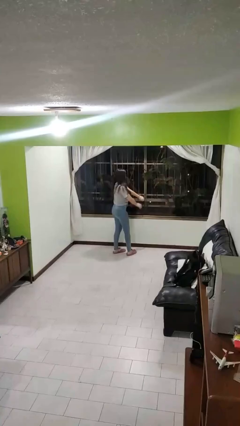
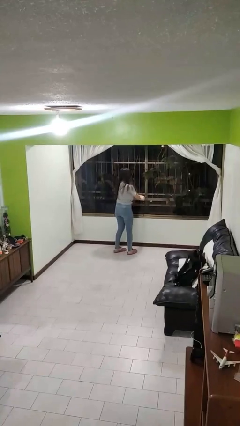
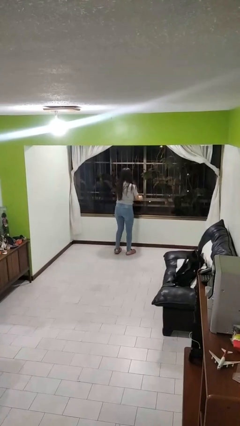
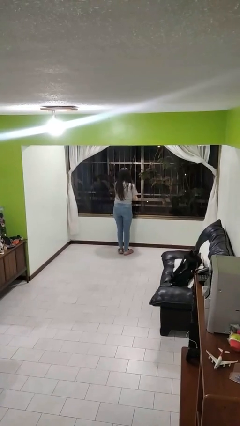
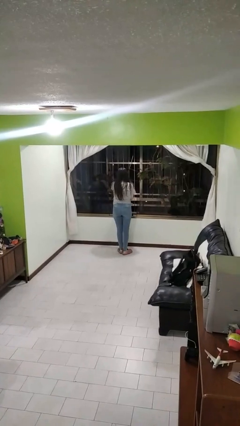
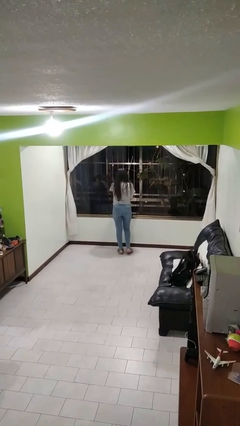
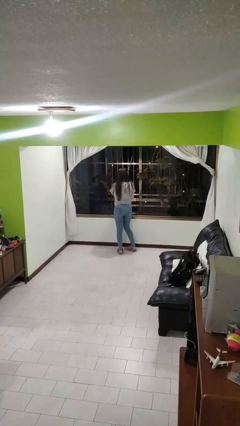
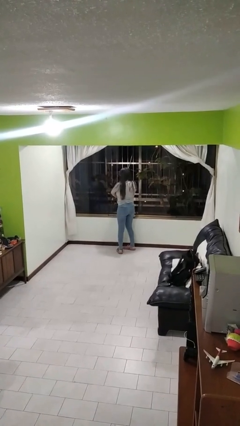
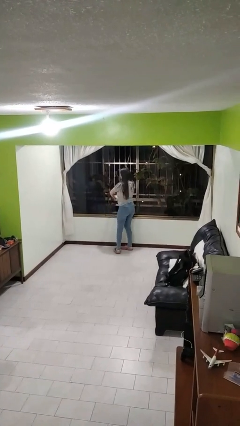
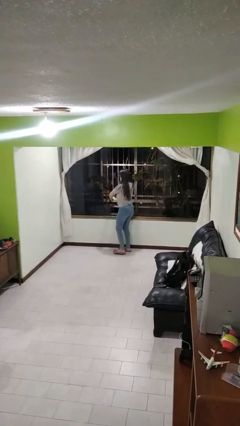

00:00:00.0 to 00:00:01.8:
person opens home window

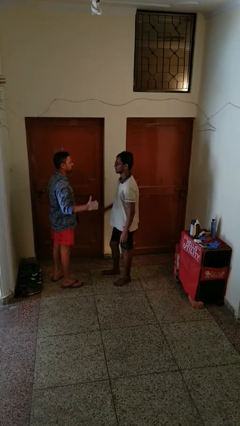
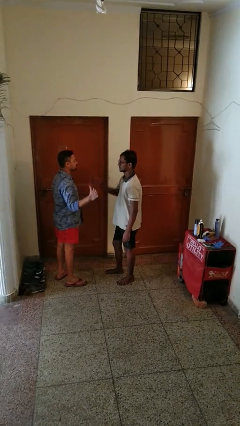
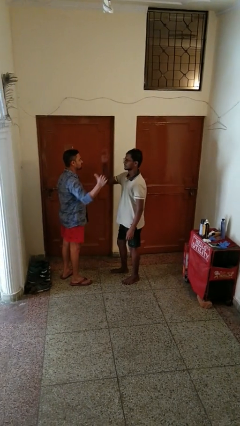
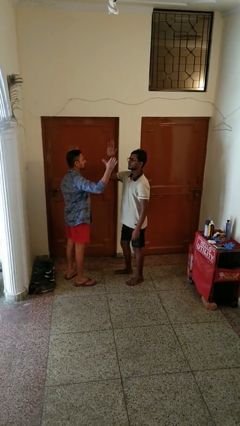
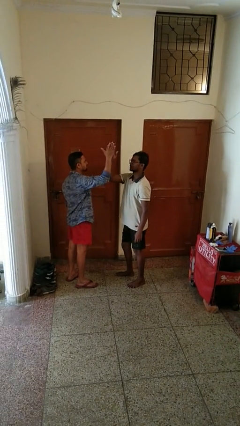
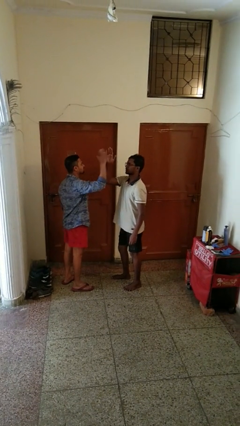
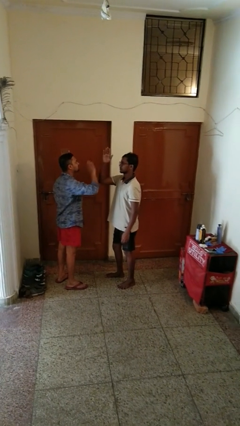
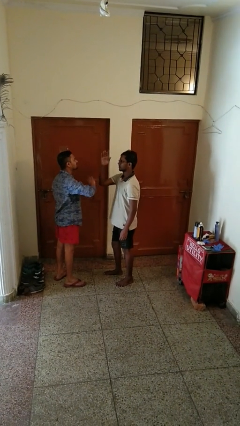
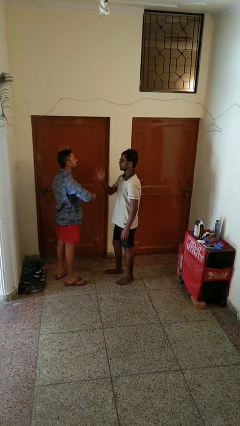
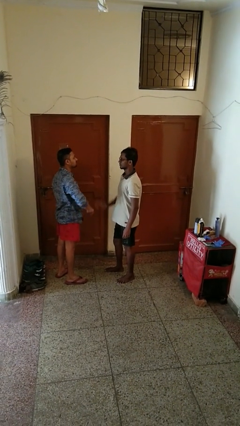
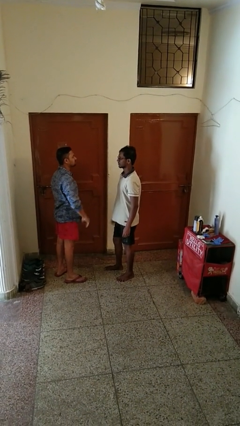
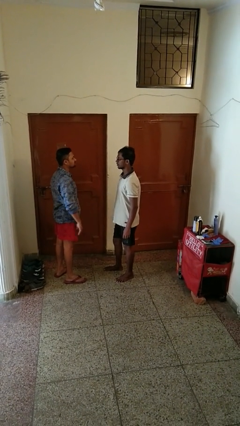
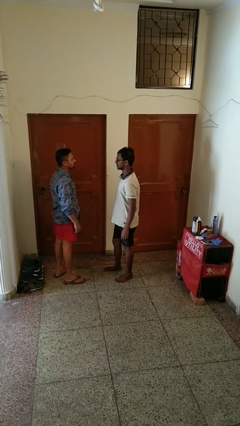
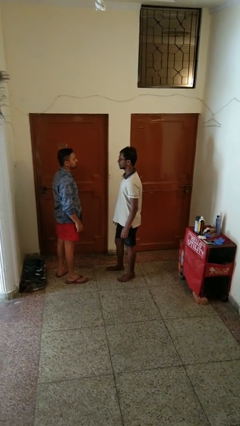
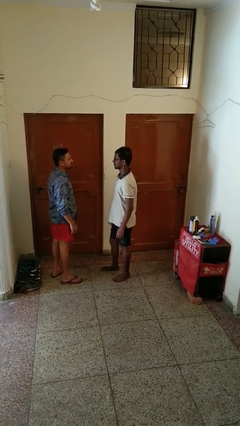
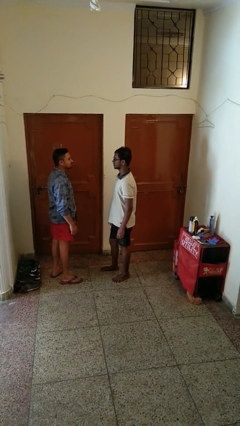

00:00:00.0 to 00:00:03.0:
person highfives hand

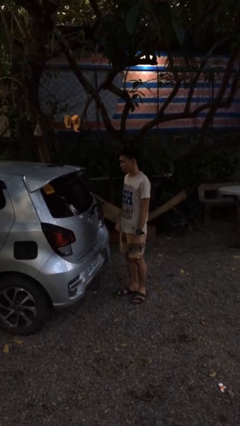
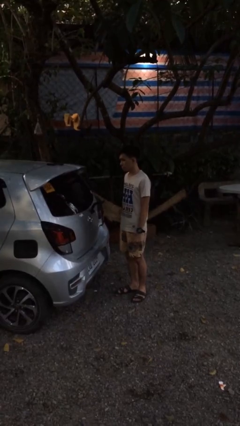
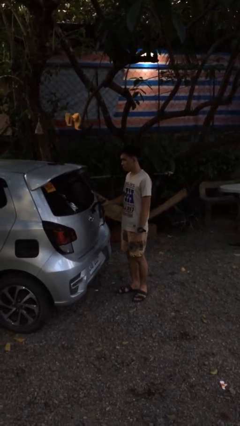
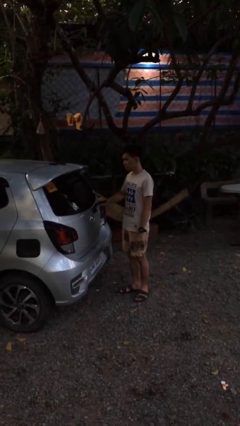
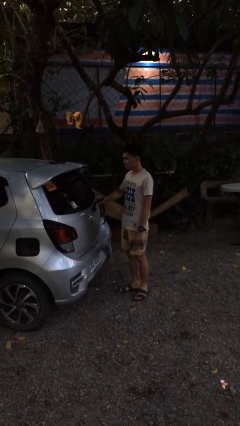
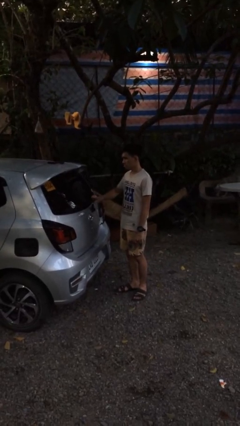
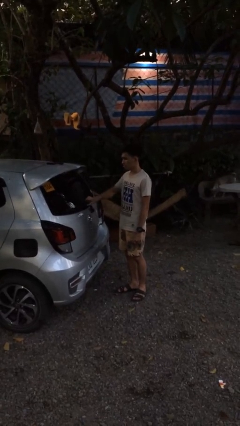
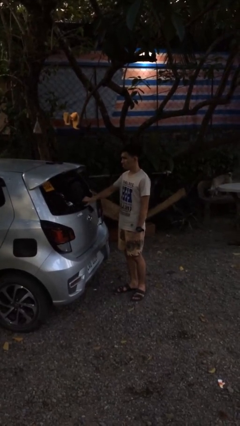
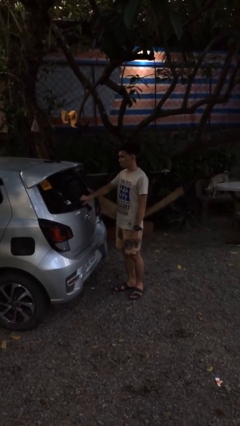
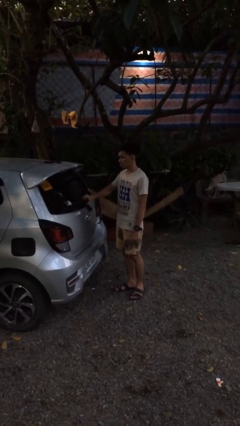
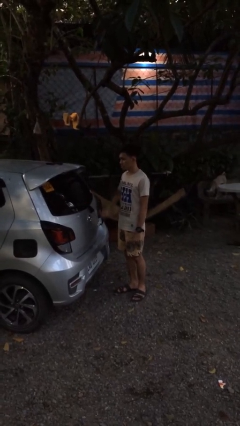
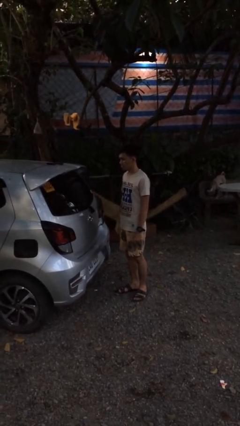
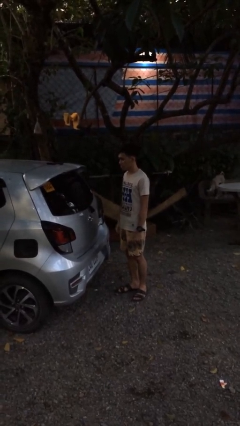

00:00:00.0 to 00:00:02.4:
person flips down car wipers

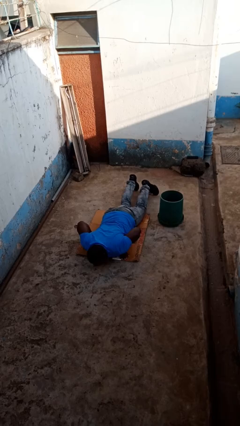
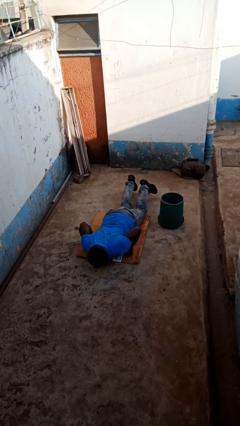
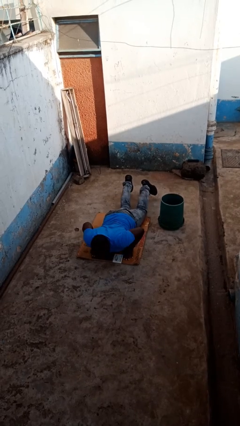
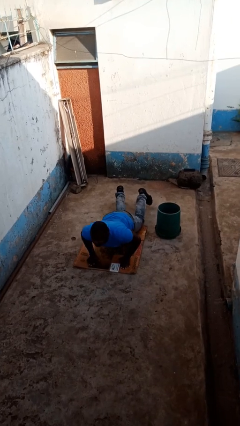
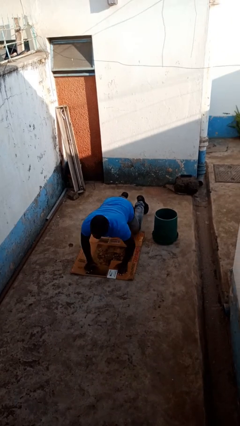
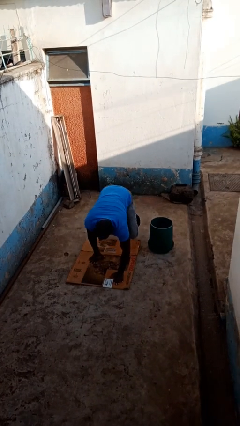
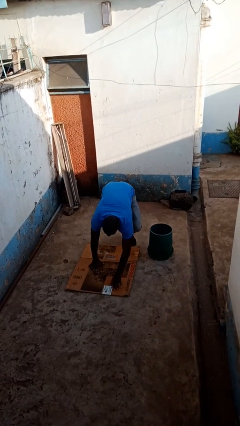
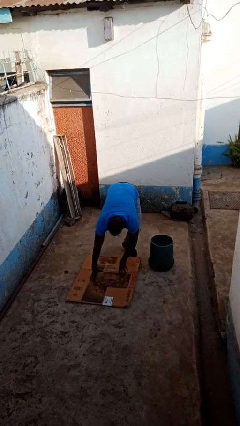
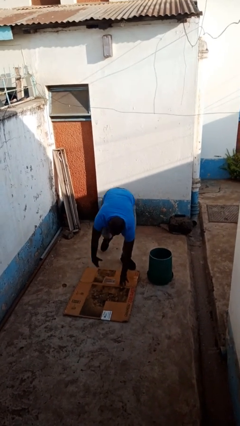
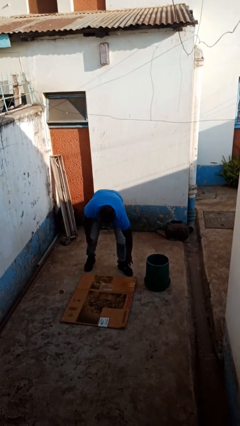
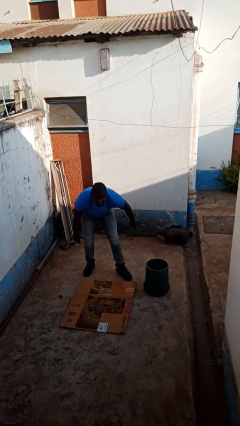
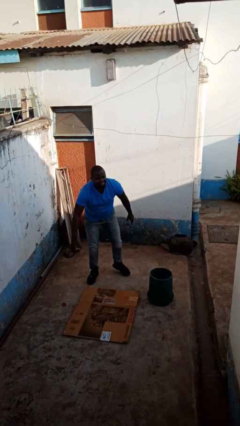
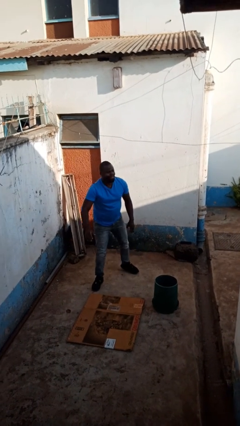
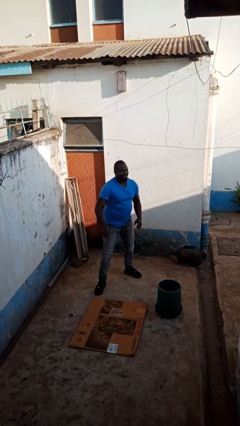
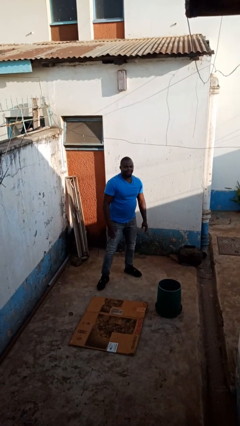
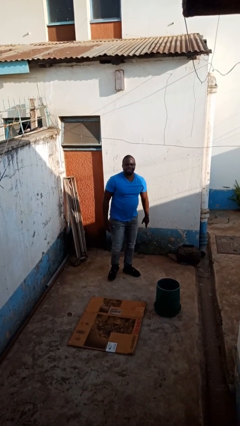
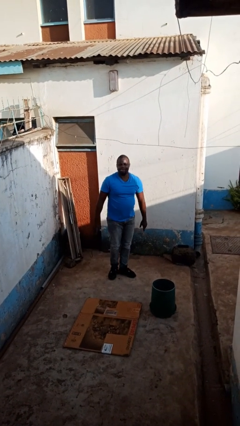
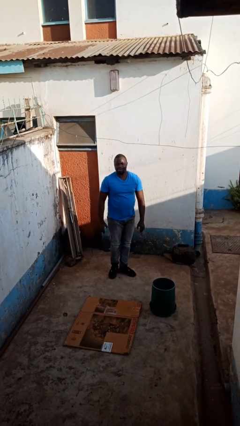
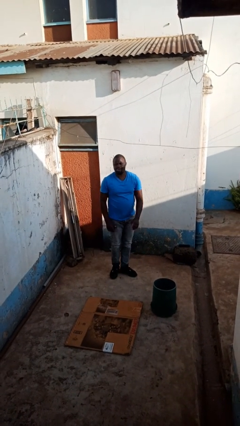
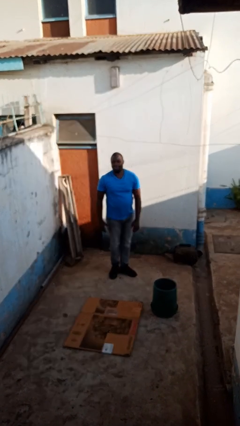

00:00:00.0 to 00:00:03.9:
person stands up from floor

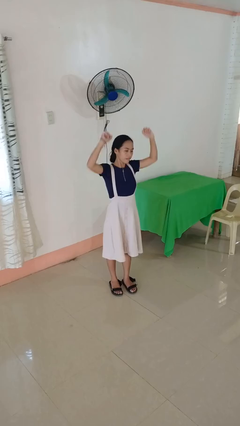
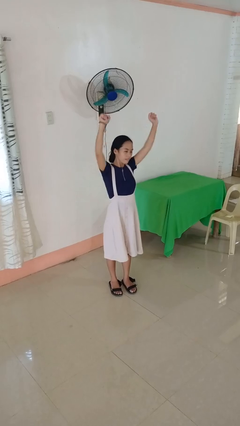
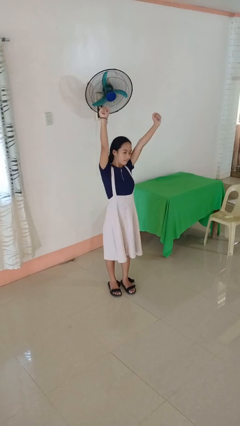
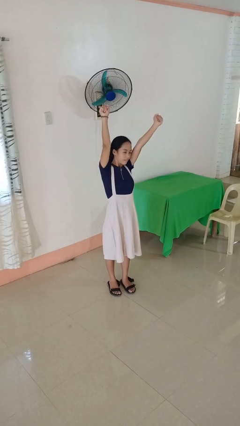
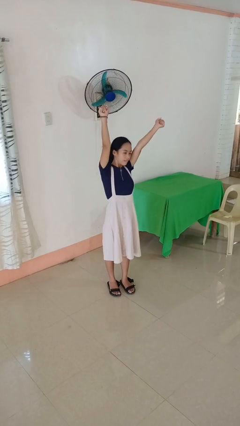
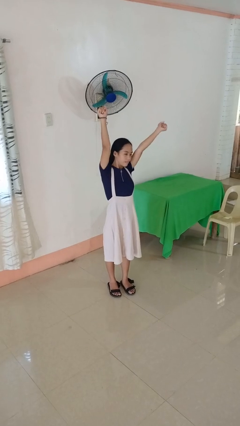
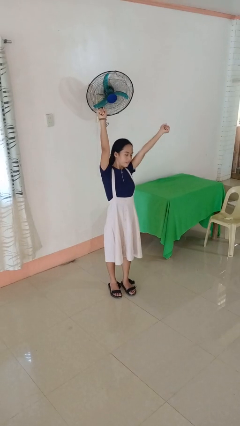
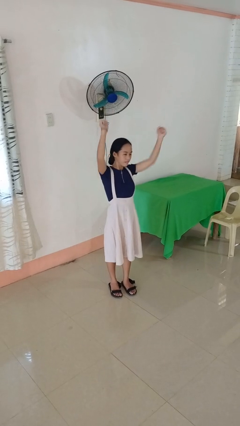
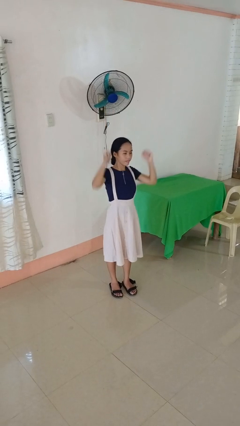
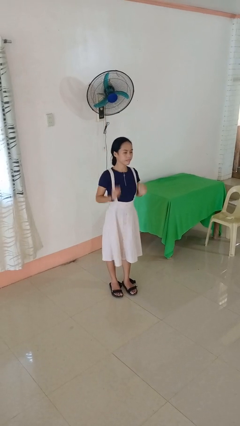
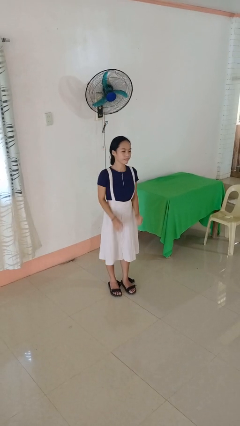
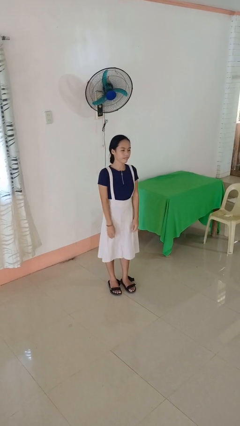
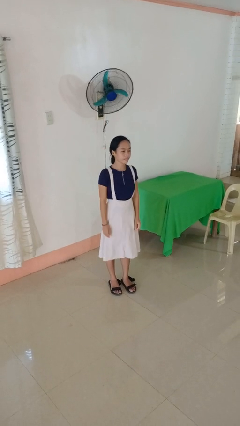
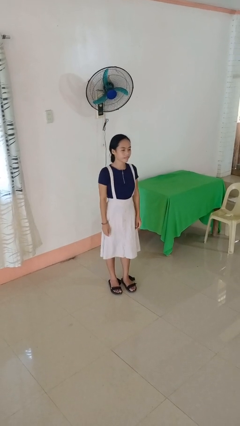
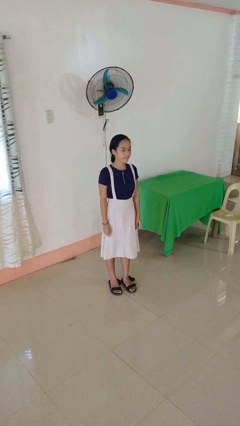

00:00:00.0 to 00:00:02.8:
person stretches arms over head

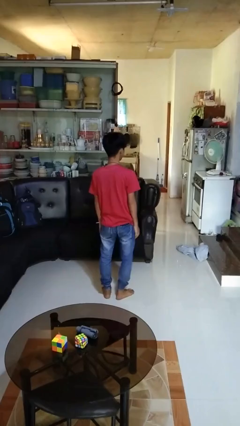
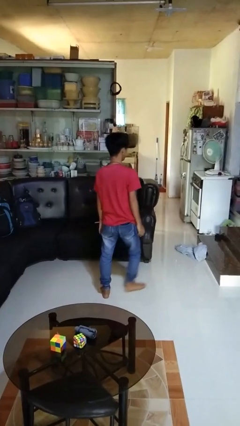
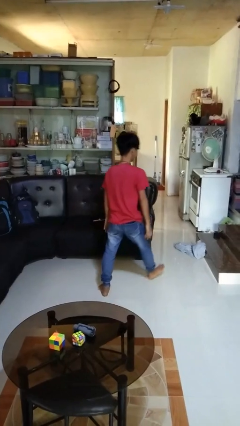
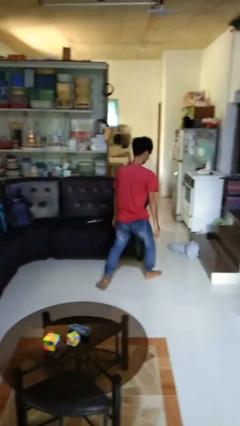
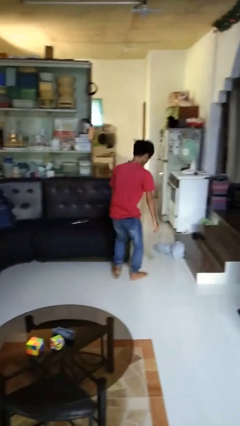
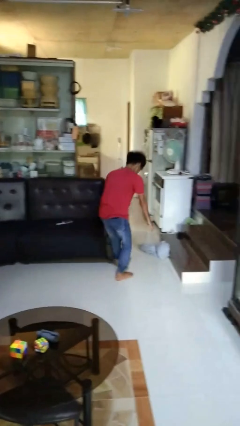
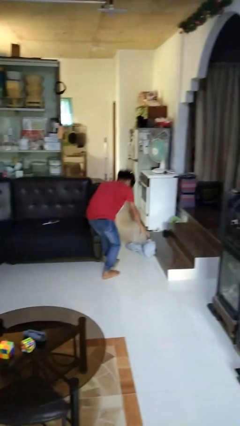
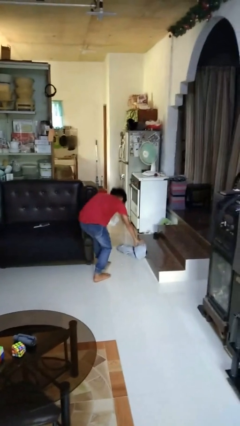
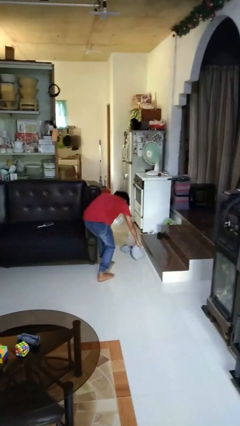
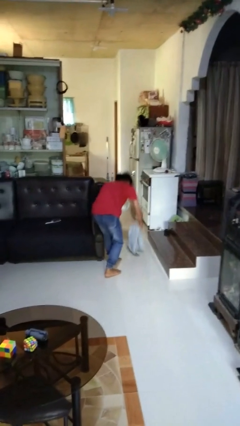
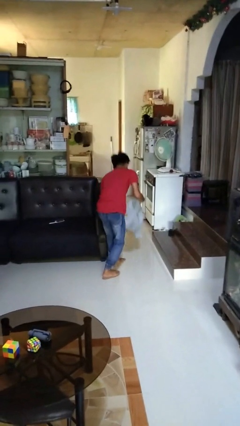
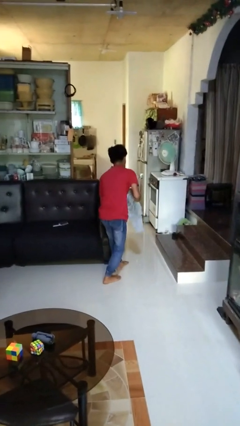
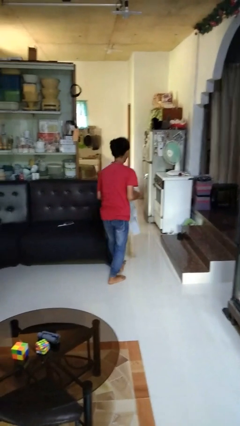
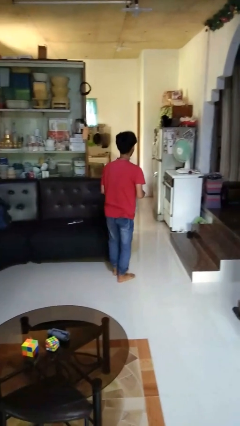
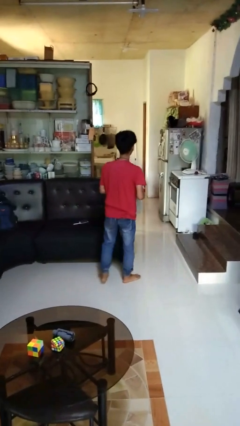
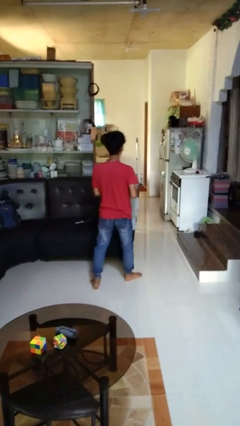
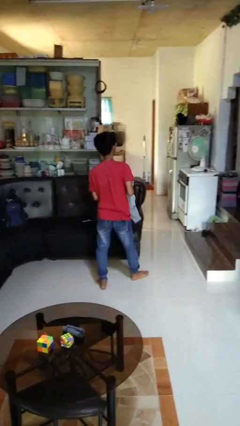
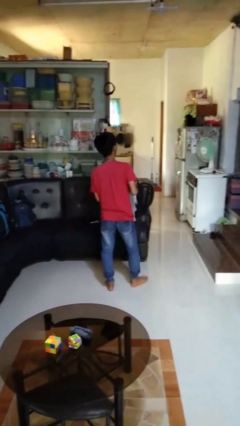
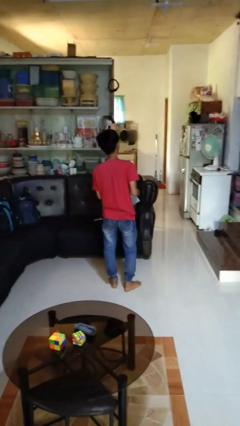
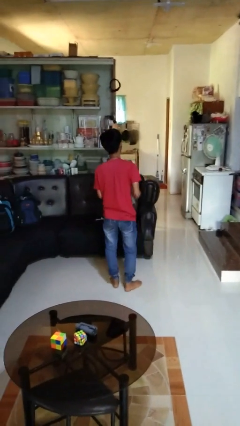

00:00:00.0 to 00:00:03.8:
person picks up object from floor
